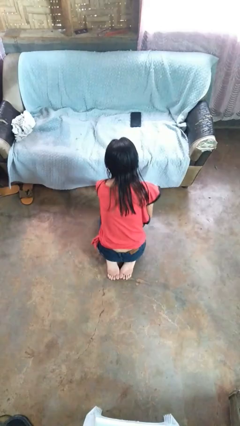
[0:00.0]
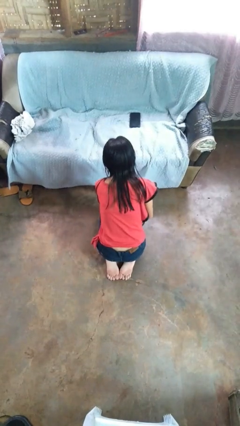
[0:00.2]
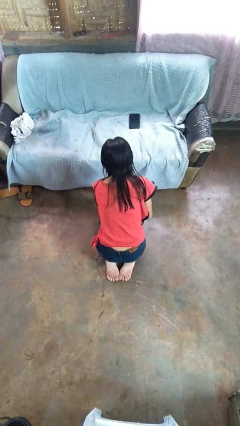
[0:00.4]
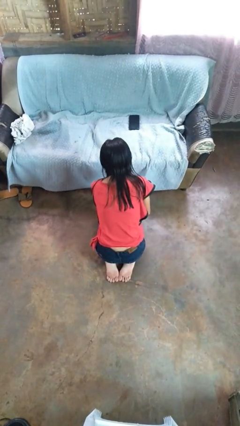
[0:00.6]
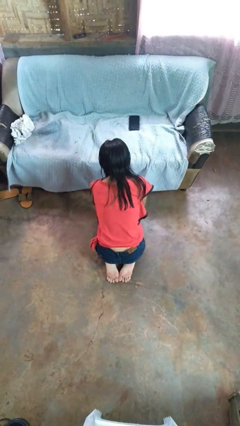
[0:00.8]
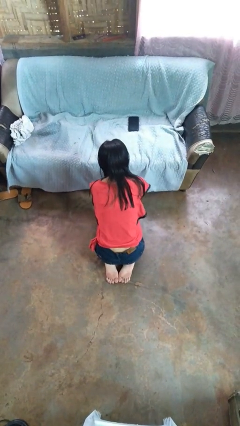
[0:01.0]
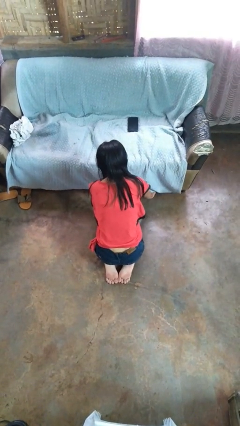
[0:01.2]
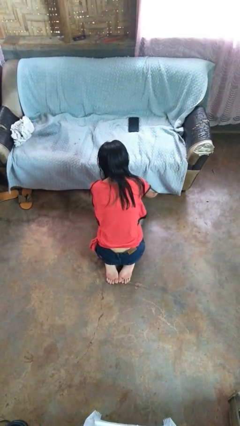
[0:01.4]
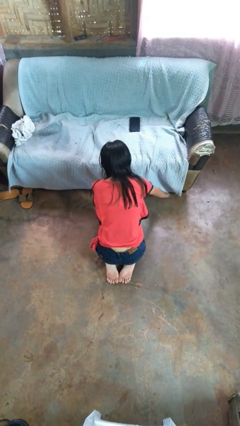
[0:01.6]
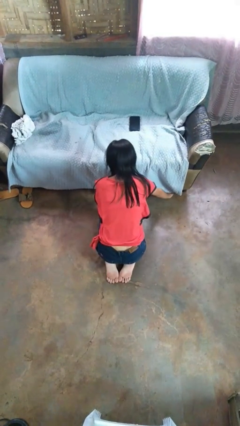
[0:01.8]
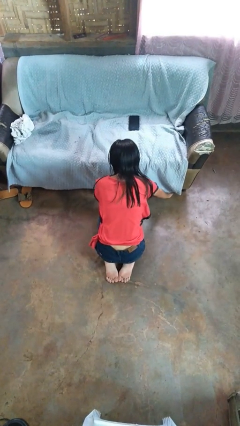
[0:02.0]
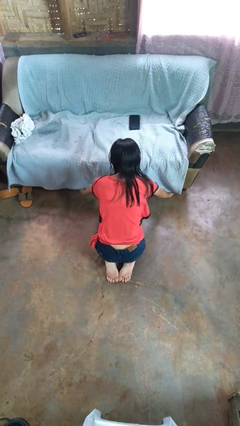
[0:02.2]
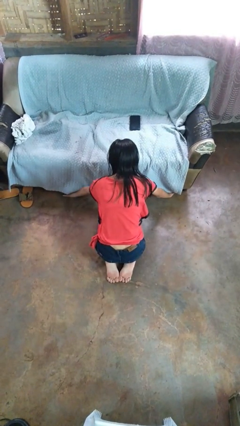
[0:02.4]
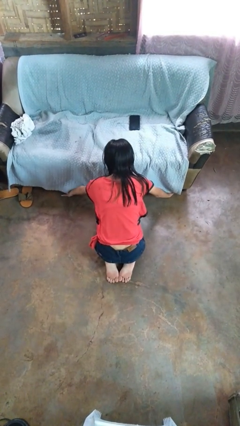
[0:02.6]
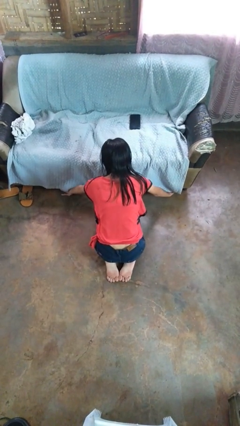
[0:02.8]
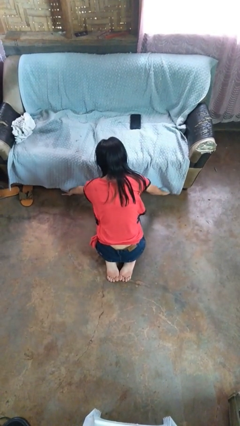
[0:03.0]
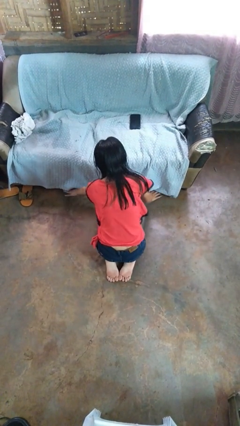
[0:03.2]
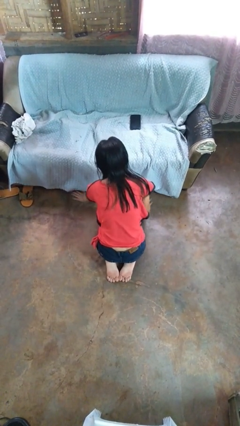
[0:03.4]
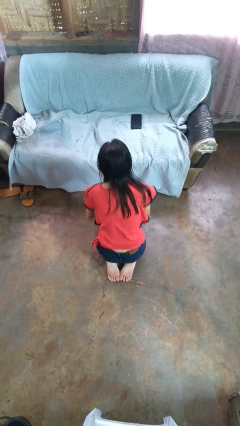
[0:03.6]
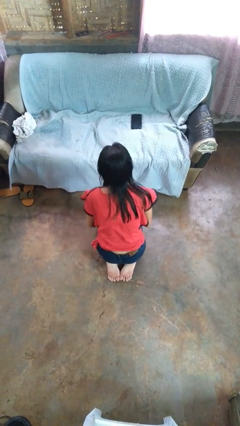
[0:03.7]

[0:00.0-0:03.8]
person searches under couch

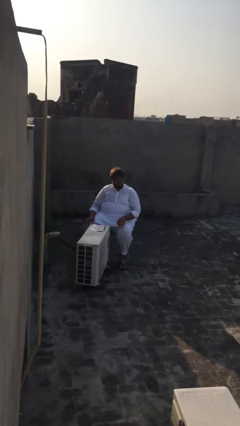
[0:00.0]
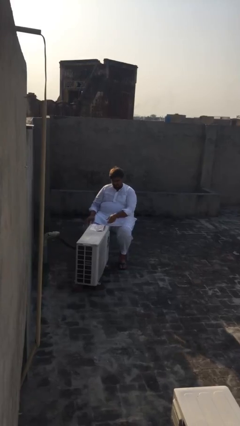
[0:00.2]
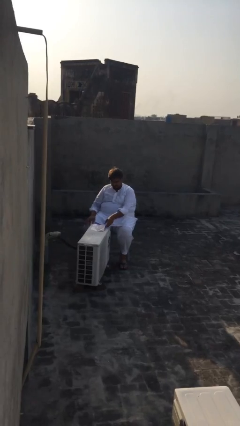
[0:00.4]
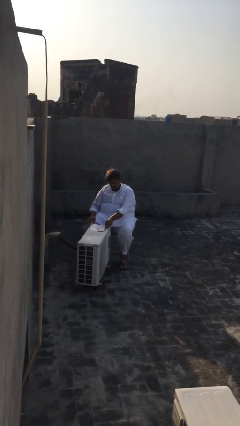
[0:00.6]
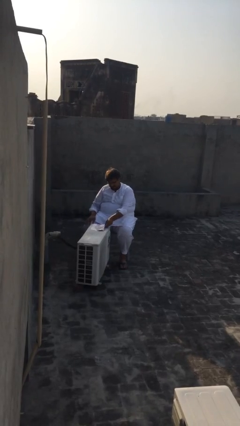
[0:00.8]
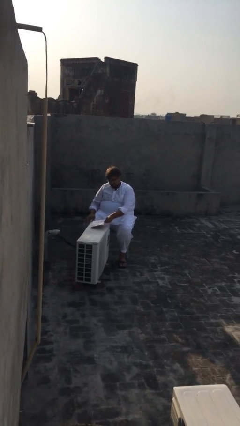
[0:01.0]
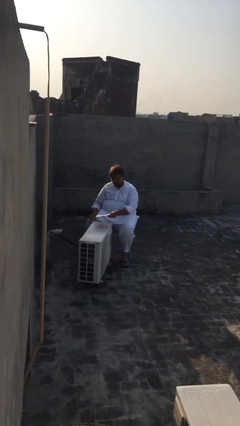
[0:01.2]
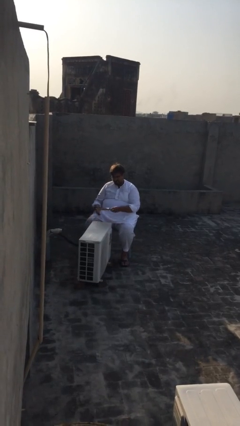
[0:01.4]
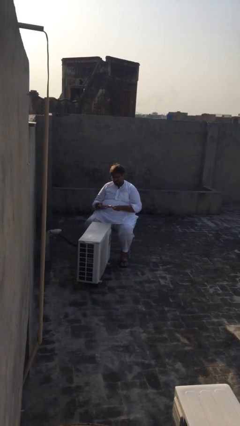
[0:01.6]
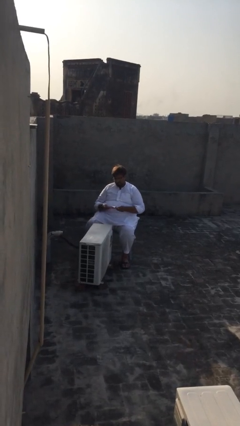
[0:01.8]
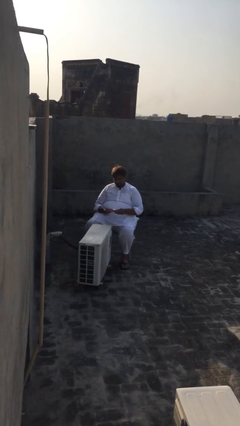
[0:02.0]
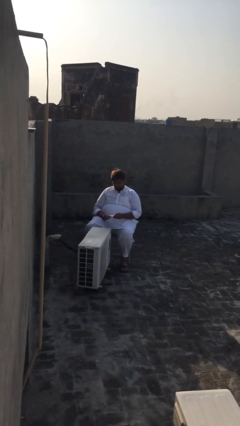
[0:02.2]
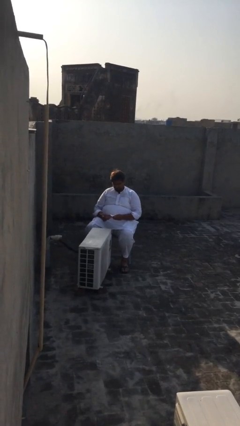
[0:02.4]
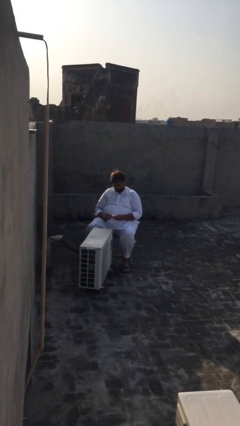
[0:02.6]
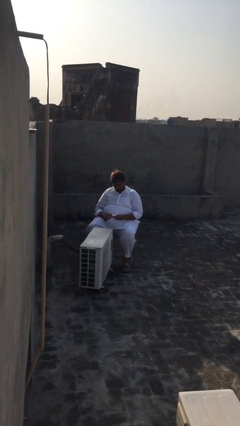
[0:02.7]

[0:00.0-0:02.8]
person picks up object from table

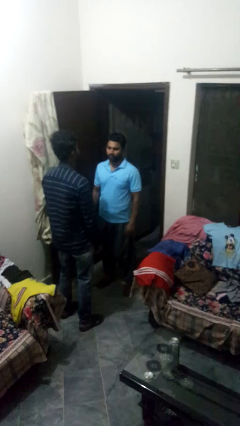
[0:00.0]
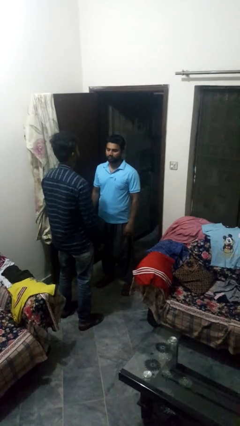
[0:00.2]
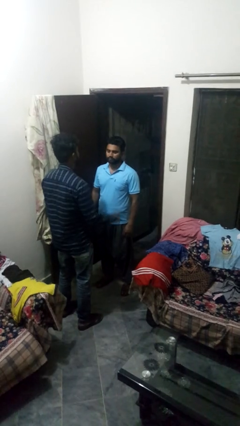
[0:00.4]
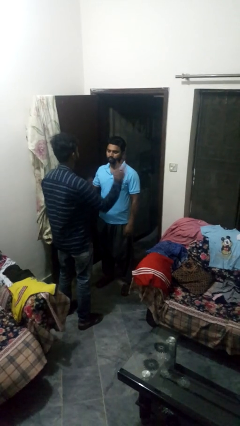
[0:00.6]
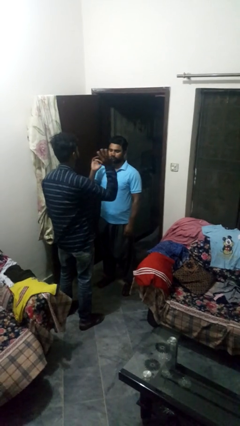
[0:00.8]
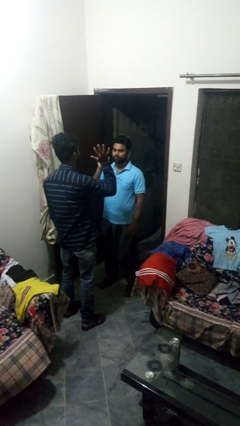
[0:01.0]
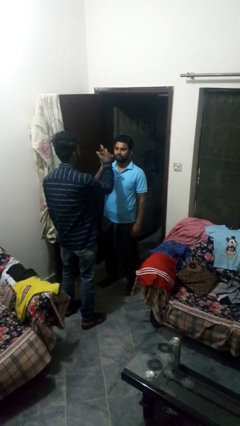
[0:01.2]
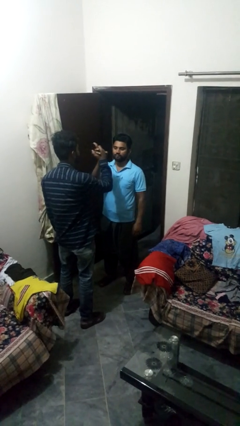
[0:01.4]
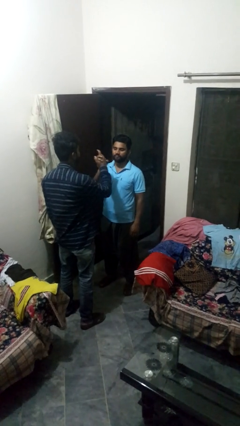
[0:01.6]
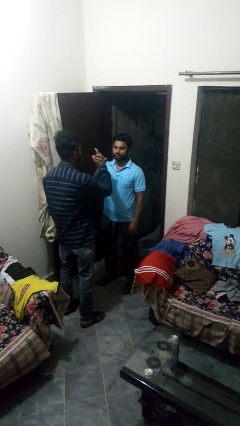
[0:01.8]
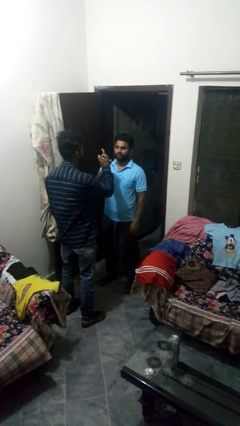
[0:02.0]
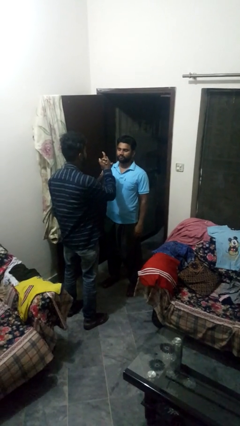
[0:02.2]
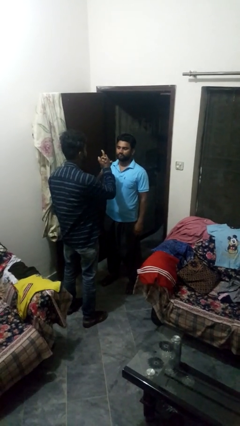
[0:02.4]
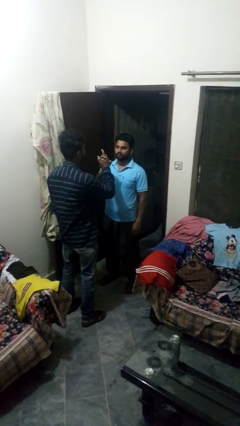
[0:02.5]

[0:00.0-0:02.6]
person highfives hand

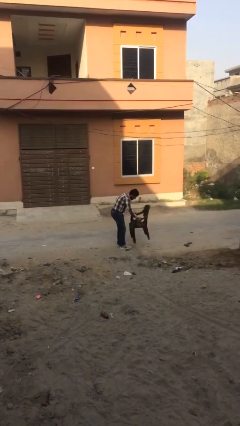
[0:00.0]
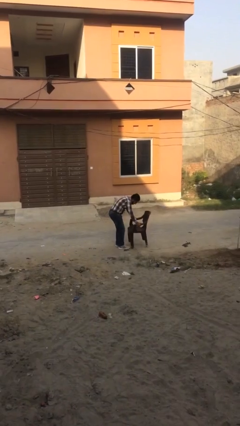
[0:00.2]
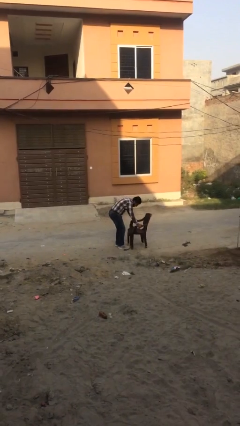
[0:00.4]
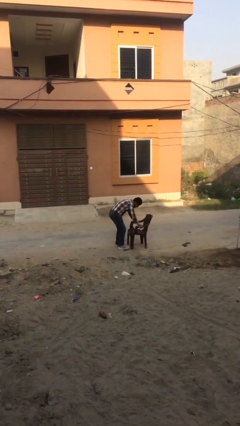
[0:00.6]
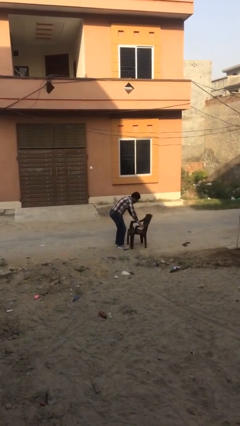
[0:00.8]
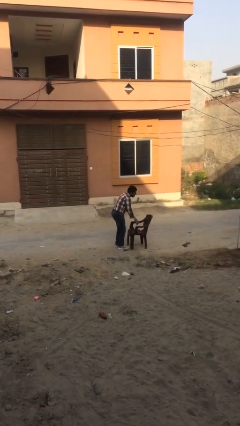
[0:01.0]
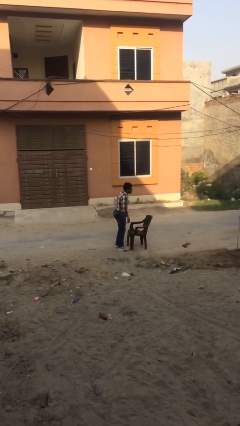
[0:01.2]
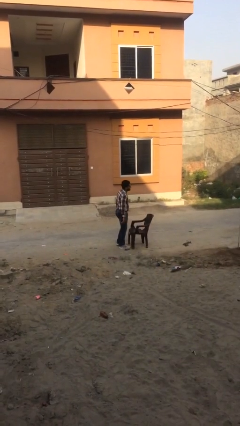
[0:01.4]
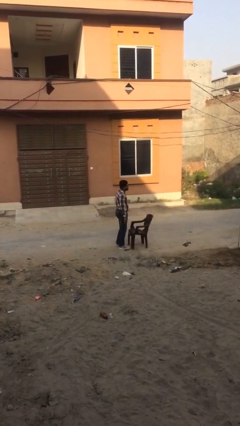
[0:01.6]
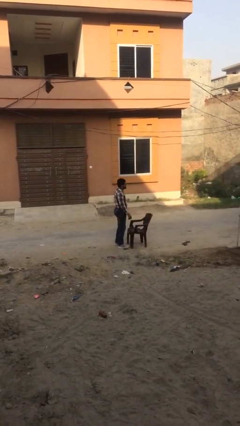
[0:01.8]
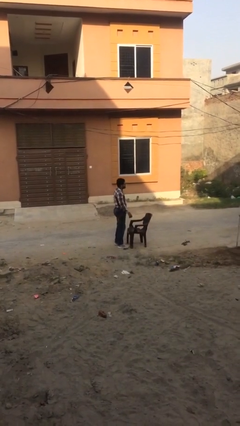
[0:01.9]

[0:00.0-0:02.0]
person puts down object on floor

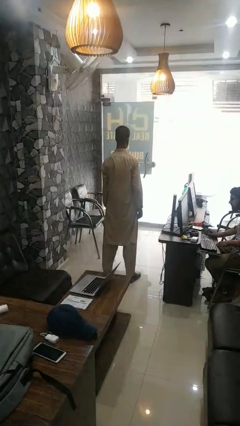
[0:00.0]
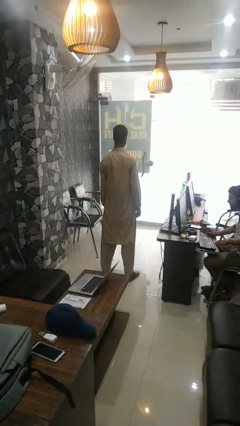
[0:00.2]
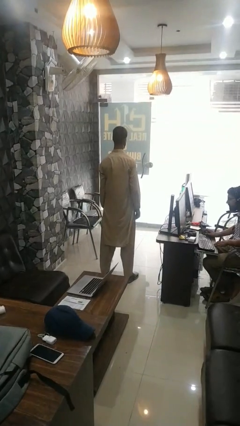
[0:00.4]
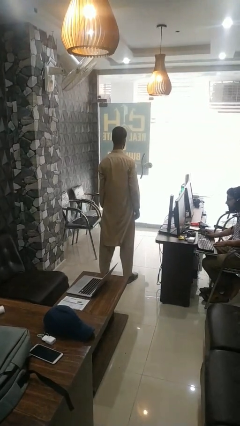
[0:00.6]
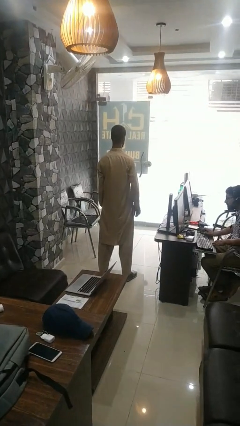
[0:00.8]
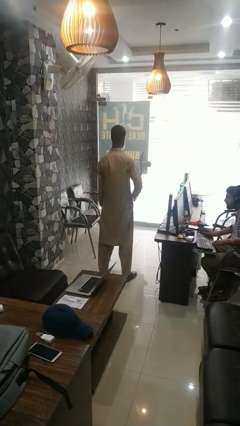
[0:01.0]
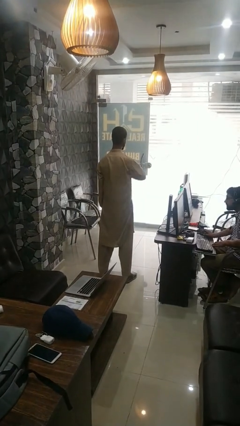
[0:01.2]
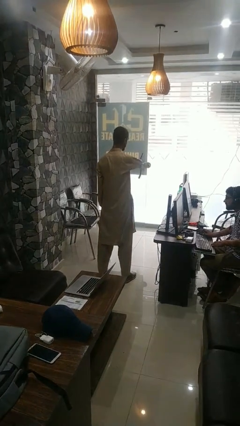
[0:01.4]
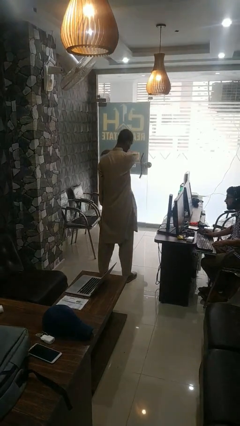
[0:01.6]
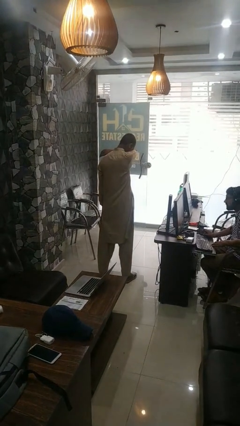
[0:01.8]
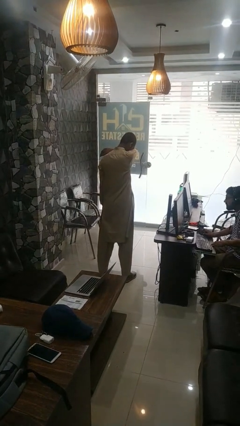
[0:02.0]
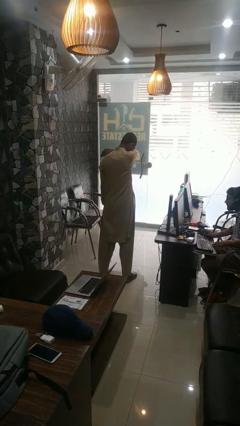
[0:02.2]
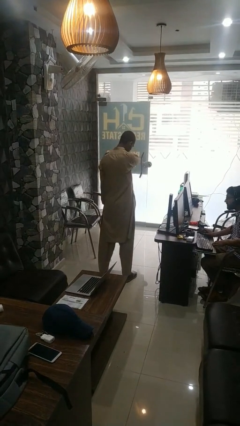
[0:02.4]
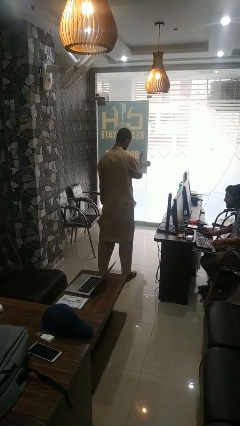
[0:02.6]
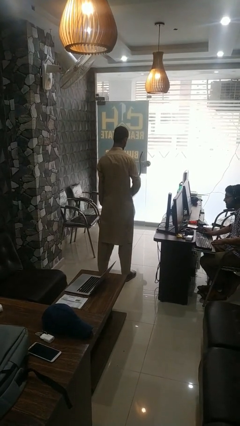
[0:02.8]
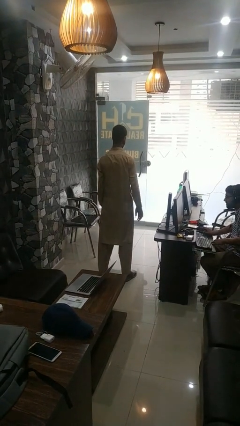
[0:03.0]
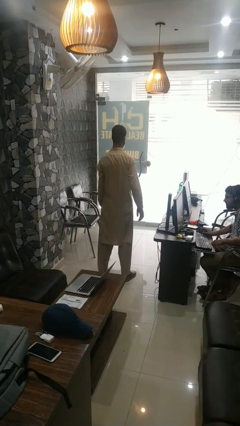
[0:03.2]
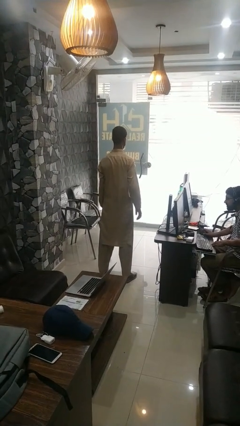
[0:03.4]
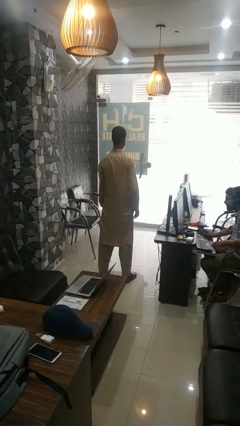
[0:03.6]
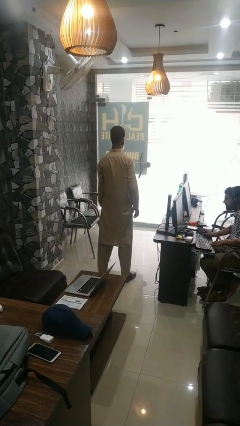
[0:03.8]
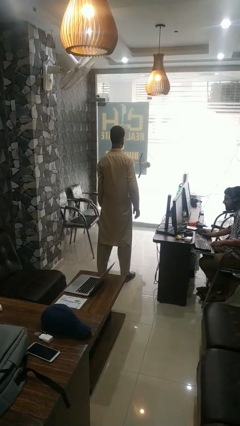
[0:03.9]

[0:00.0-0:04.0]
person sneezes into arm

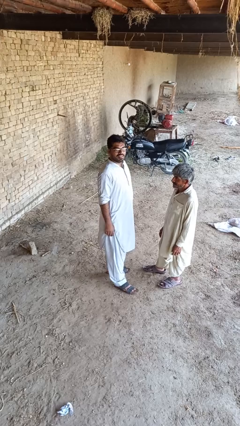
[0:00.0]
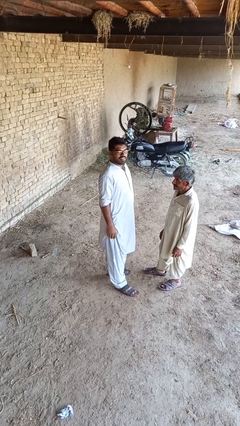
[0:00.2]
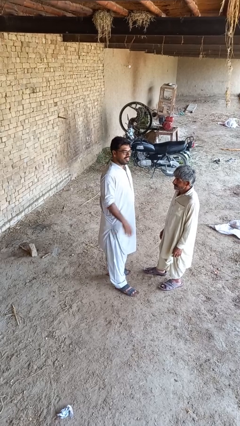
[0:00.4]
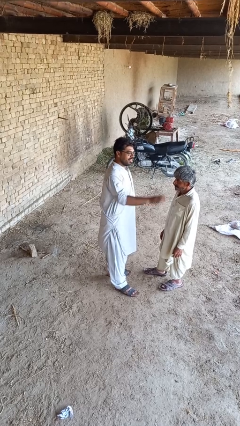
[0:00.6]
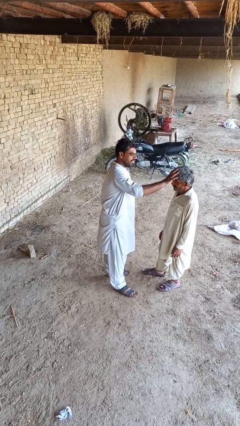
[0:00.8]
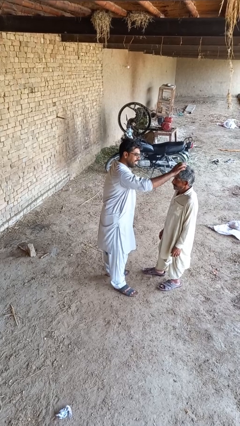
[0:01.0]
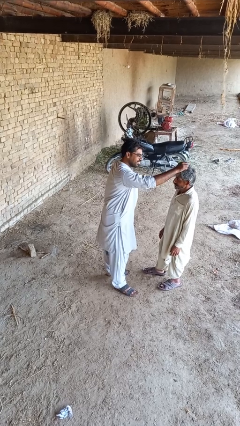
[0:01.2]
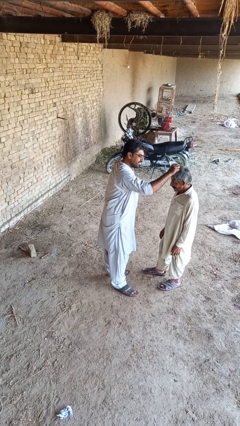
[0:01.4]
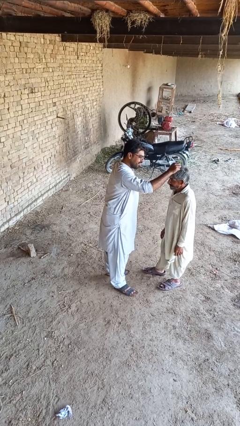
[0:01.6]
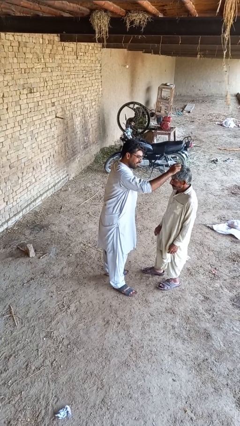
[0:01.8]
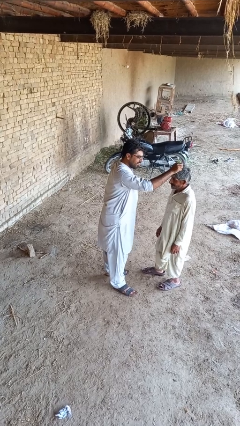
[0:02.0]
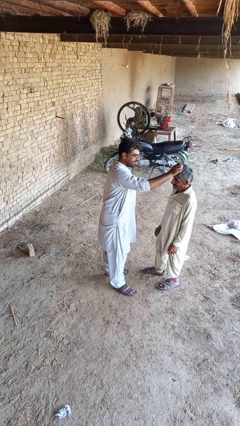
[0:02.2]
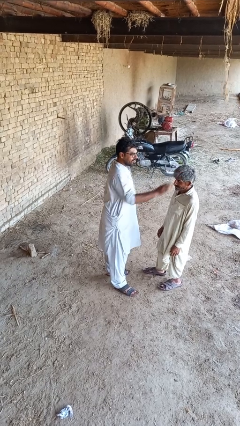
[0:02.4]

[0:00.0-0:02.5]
person grabs person by hair
